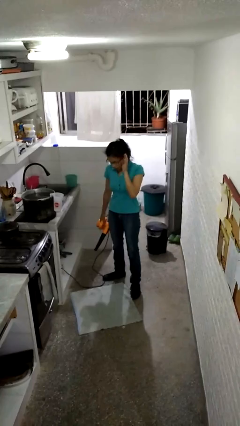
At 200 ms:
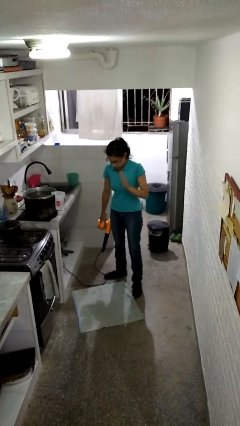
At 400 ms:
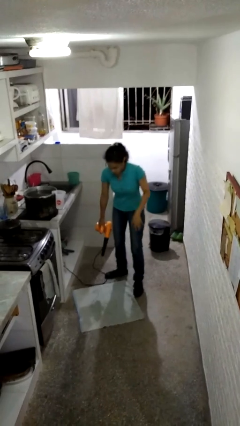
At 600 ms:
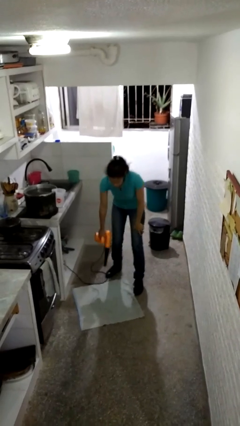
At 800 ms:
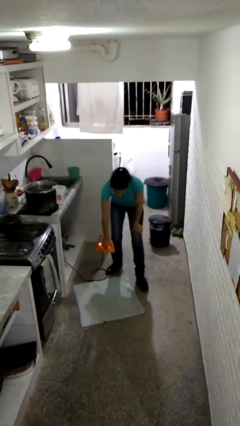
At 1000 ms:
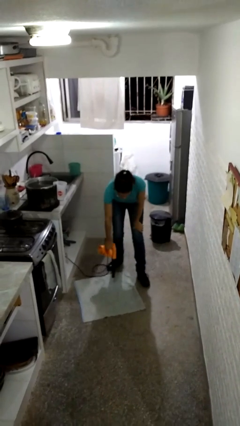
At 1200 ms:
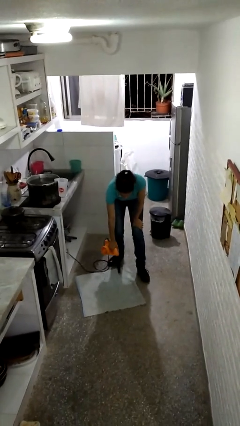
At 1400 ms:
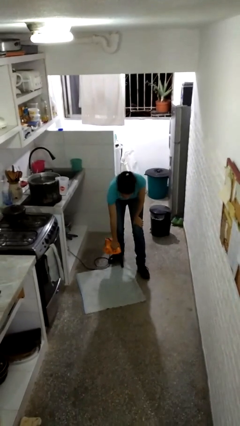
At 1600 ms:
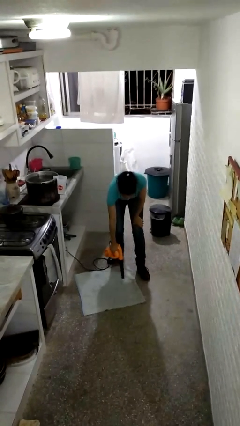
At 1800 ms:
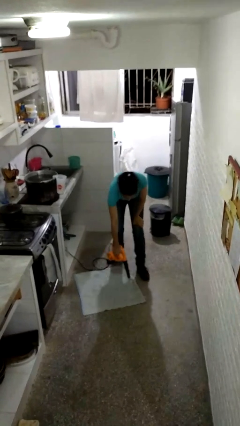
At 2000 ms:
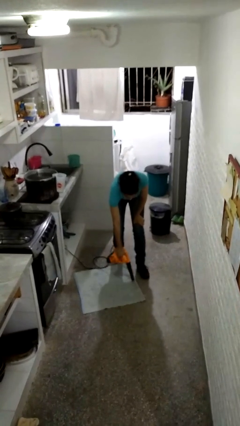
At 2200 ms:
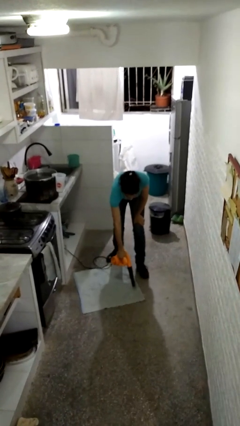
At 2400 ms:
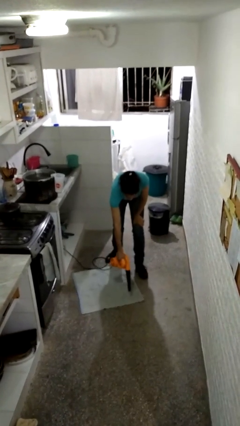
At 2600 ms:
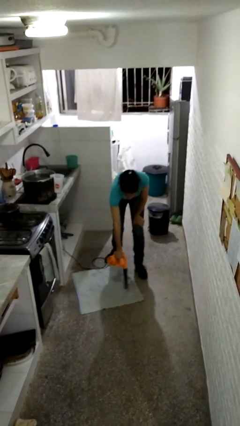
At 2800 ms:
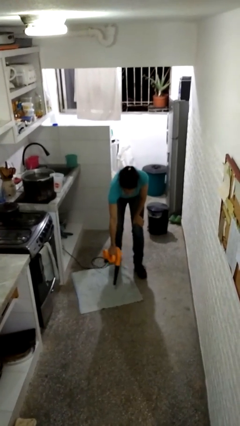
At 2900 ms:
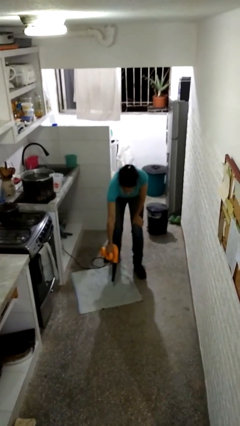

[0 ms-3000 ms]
person vacuums carpet

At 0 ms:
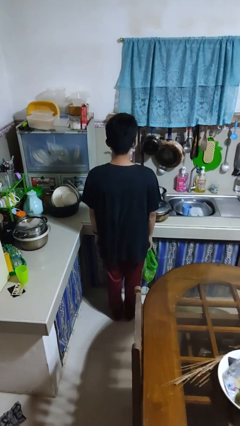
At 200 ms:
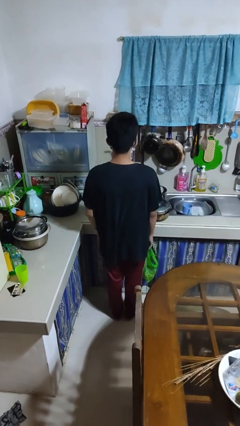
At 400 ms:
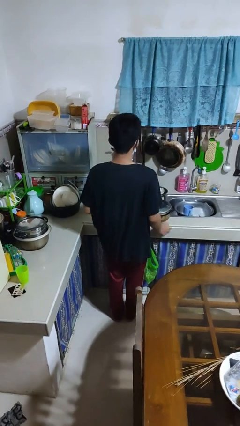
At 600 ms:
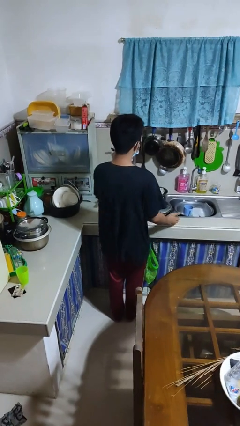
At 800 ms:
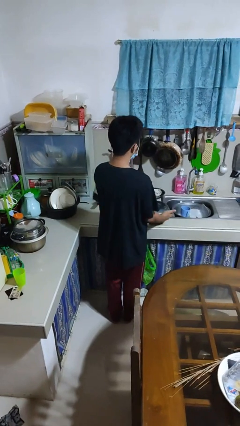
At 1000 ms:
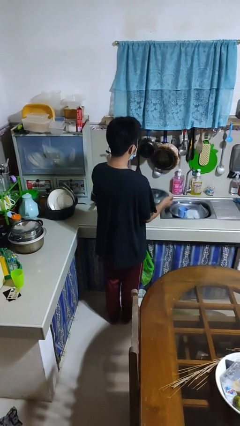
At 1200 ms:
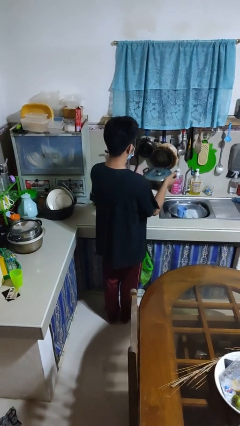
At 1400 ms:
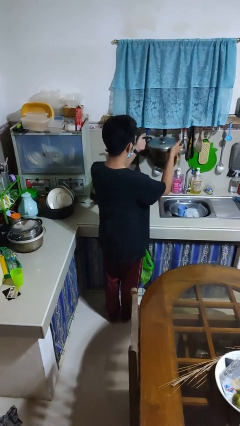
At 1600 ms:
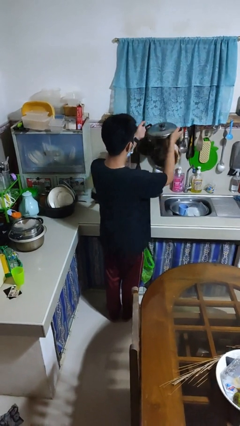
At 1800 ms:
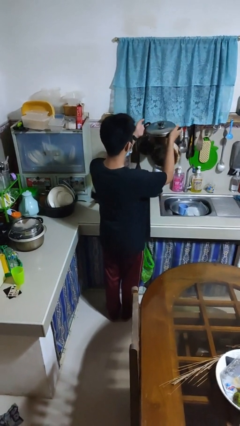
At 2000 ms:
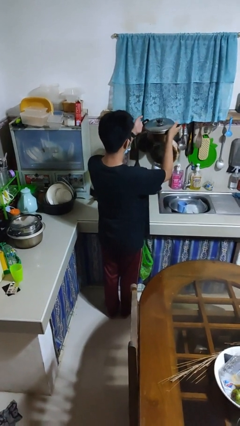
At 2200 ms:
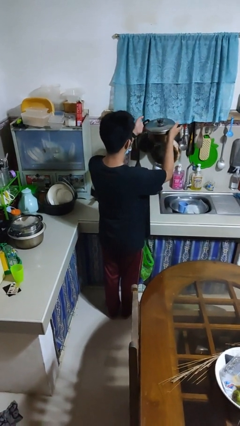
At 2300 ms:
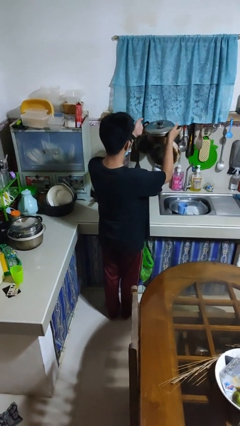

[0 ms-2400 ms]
person picks up object from countertop

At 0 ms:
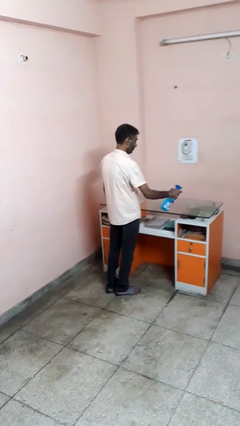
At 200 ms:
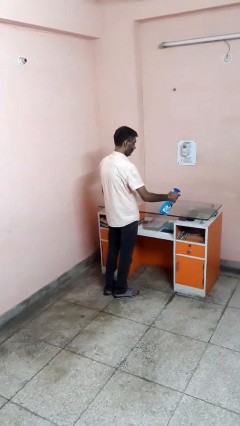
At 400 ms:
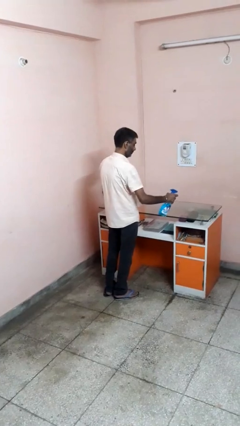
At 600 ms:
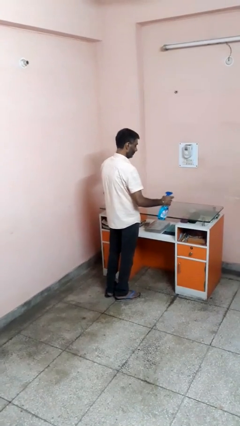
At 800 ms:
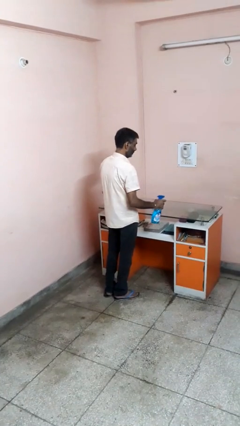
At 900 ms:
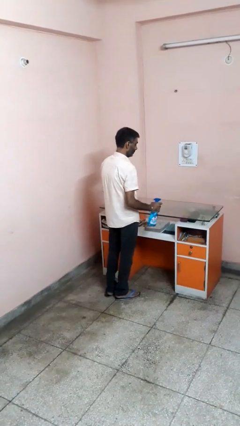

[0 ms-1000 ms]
person sprays from bottle

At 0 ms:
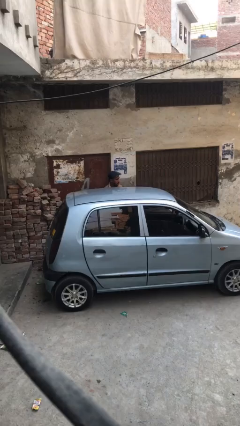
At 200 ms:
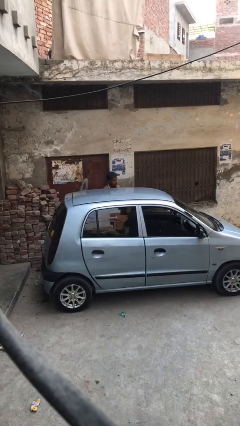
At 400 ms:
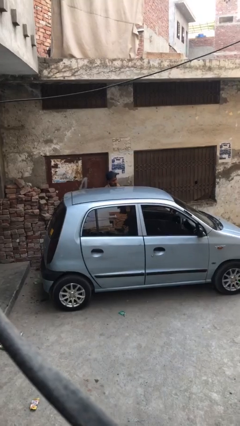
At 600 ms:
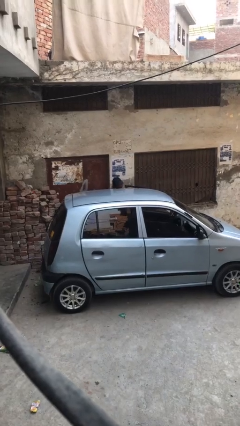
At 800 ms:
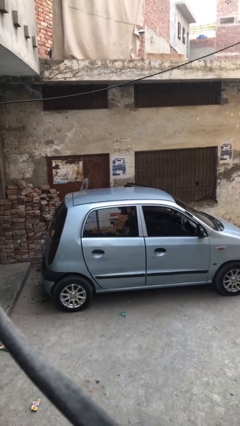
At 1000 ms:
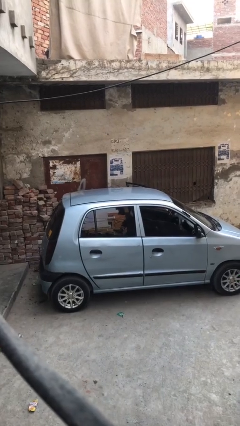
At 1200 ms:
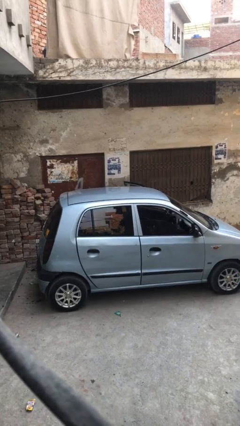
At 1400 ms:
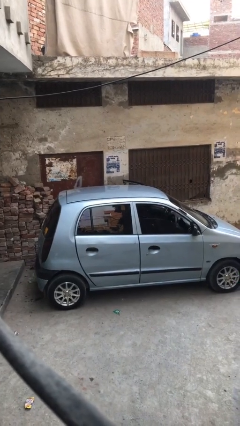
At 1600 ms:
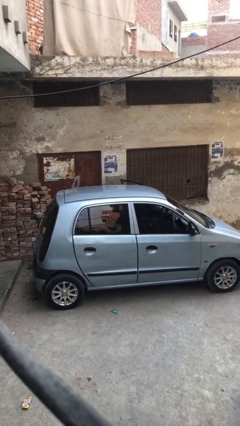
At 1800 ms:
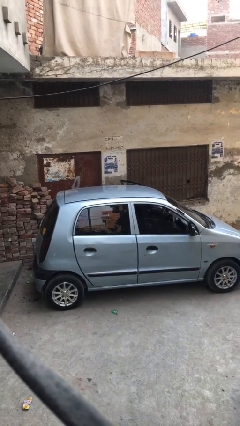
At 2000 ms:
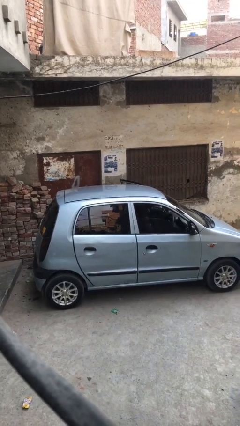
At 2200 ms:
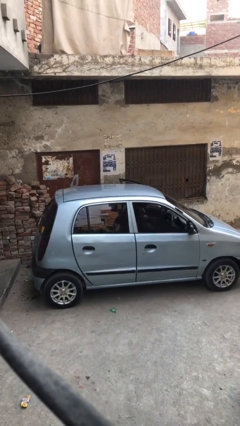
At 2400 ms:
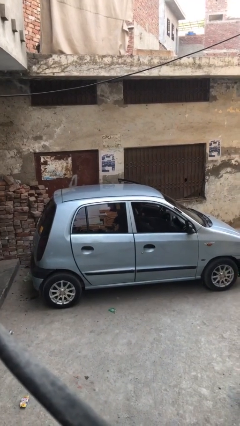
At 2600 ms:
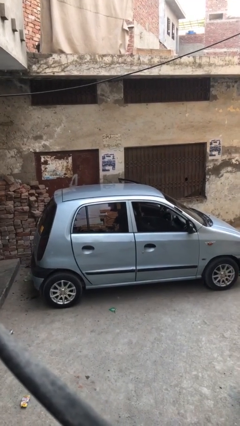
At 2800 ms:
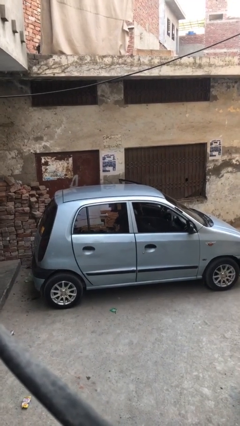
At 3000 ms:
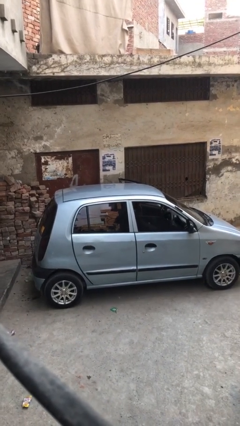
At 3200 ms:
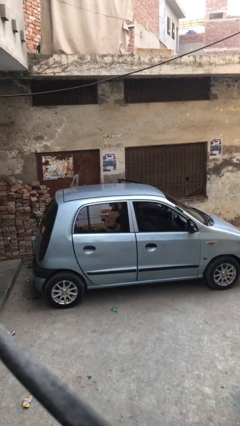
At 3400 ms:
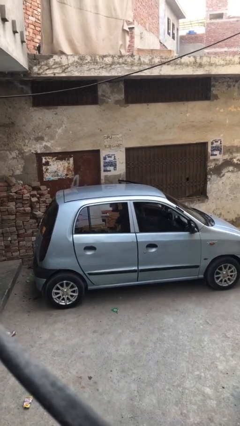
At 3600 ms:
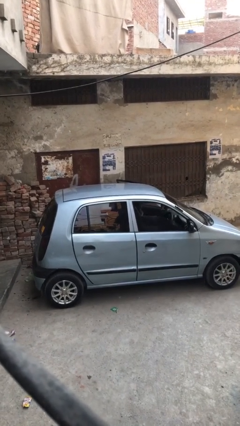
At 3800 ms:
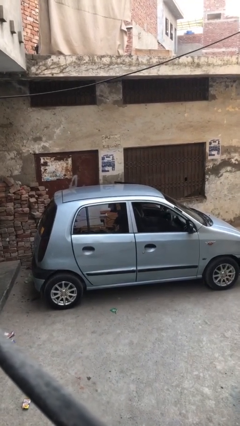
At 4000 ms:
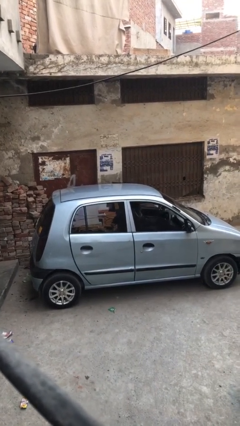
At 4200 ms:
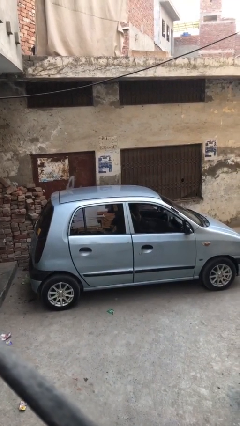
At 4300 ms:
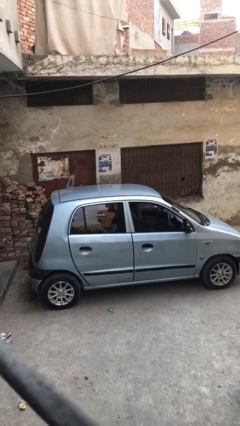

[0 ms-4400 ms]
person enters car

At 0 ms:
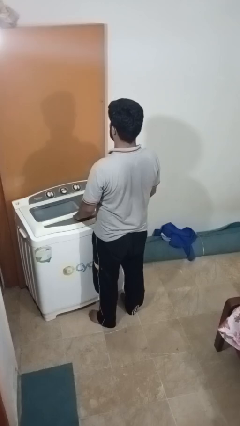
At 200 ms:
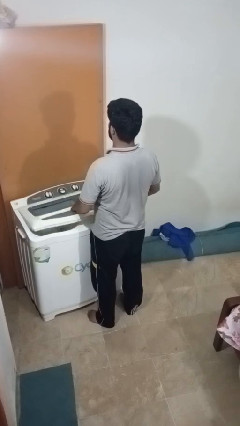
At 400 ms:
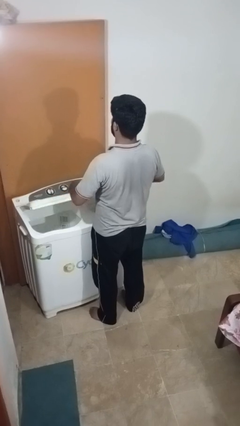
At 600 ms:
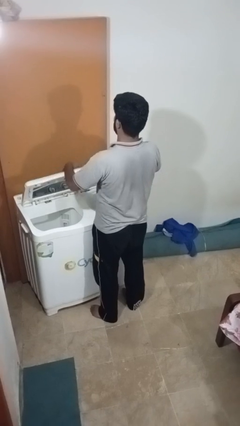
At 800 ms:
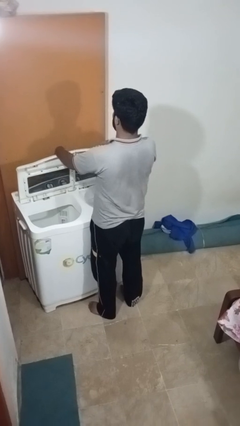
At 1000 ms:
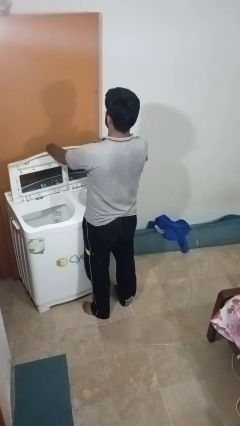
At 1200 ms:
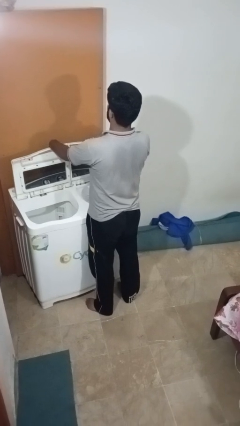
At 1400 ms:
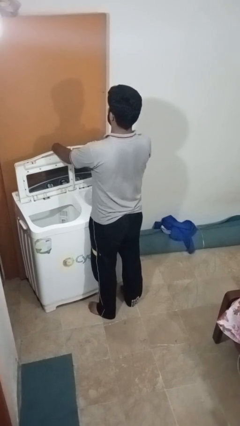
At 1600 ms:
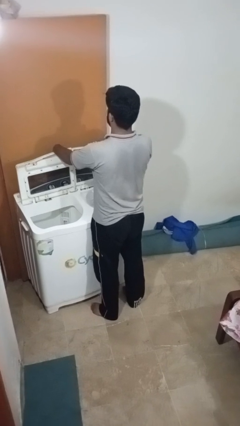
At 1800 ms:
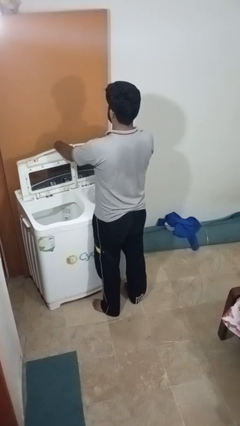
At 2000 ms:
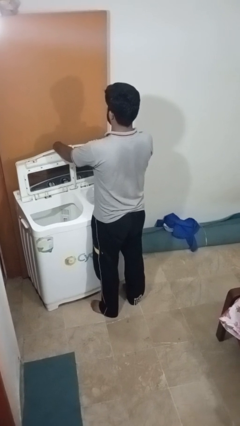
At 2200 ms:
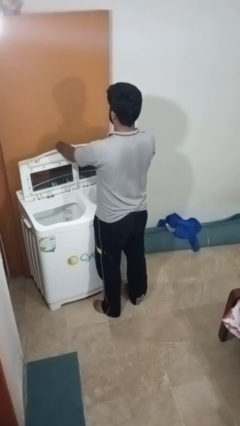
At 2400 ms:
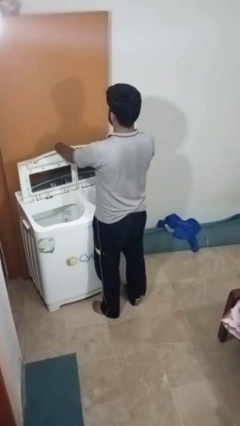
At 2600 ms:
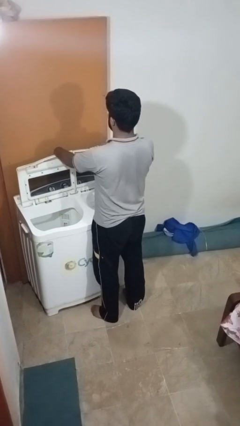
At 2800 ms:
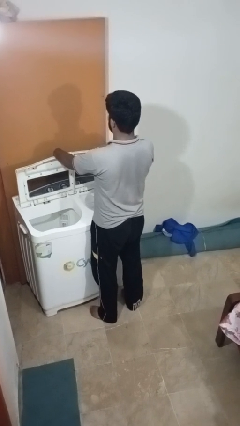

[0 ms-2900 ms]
person opens clothes washer

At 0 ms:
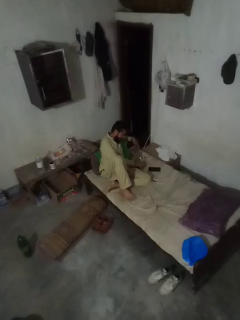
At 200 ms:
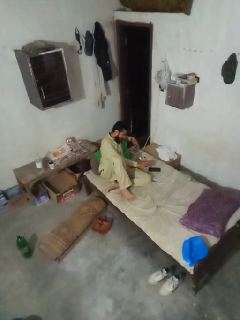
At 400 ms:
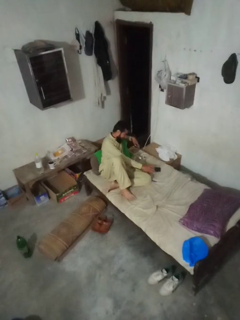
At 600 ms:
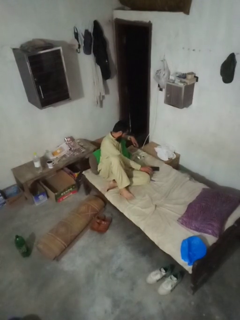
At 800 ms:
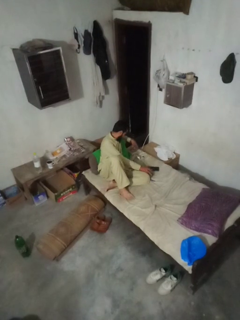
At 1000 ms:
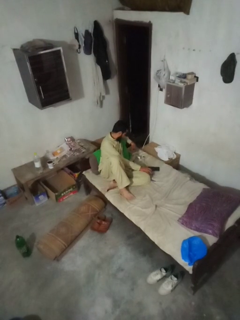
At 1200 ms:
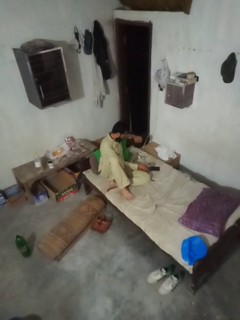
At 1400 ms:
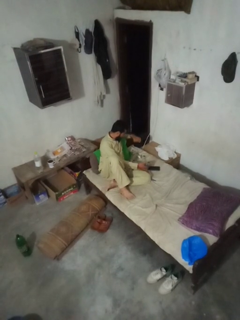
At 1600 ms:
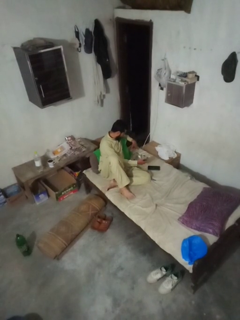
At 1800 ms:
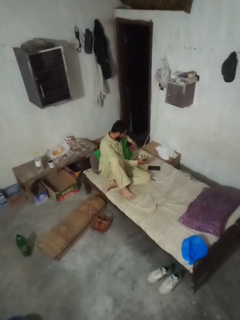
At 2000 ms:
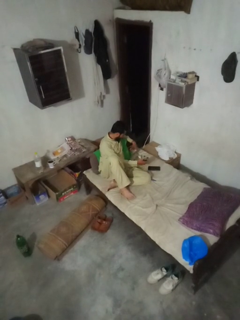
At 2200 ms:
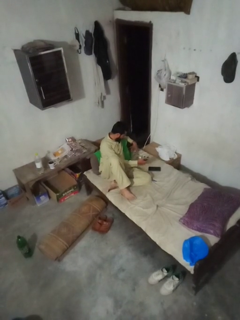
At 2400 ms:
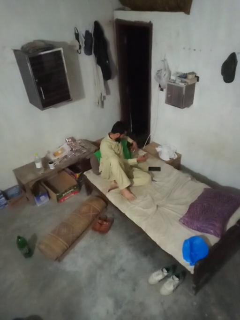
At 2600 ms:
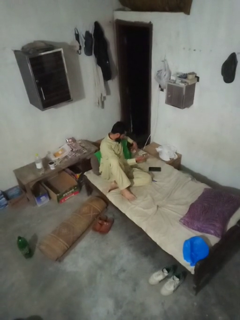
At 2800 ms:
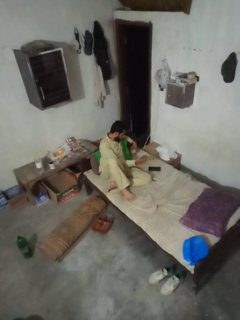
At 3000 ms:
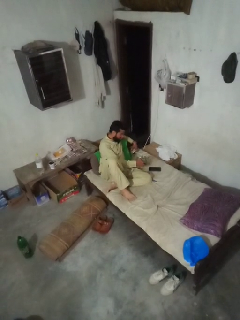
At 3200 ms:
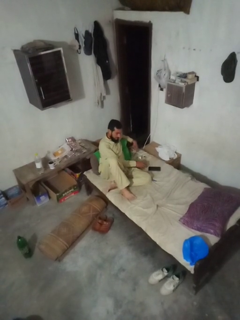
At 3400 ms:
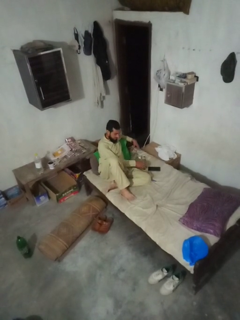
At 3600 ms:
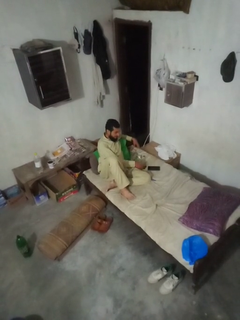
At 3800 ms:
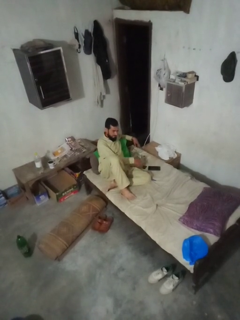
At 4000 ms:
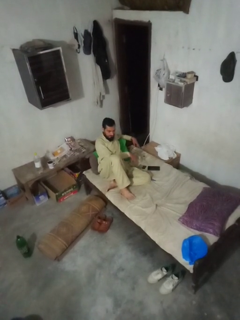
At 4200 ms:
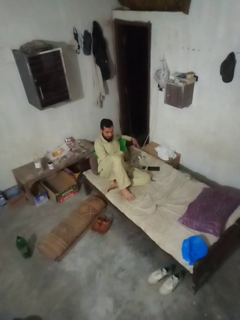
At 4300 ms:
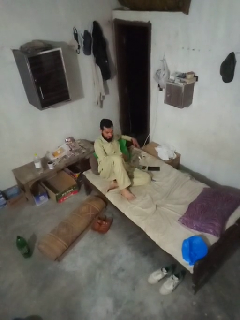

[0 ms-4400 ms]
person searches under bed
